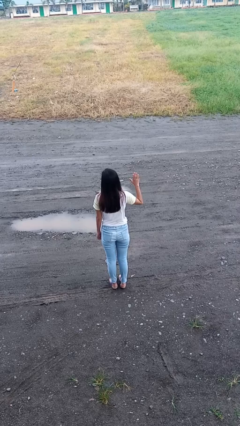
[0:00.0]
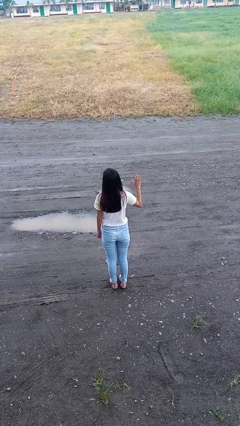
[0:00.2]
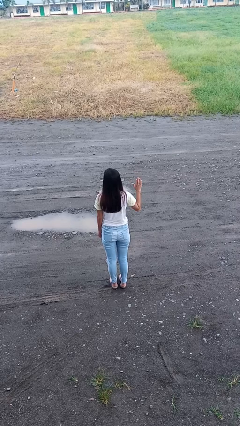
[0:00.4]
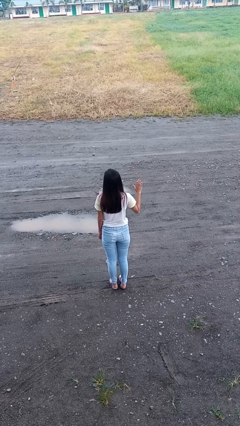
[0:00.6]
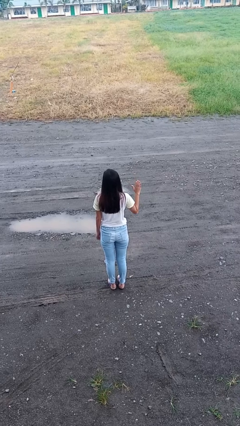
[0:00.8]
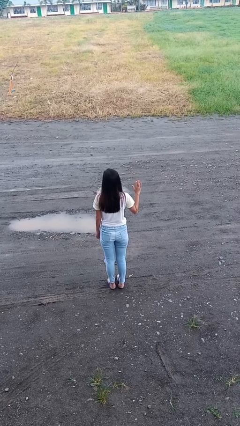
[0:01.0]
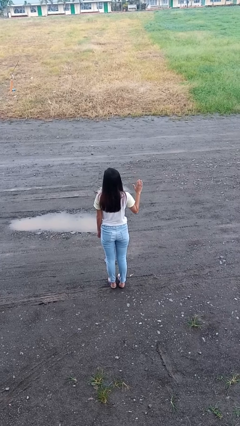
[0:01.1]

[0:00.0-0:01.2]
person gestures lower hand

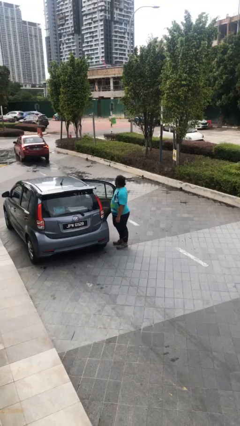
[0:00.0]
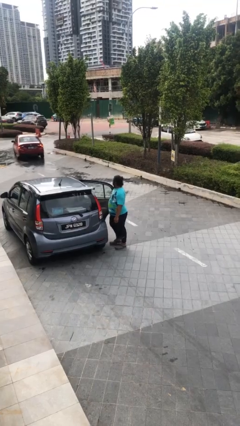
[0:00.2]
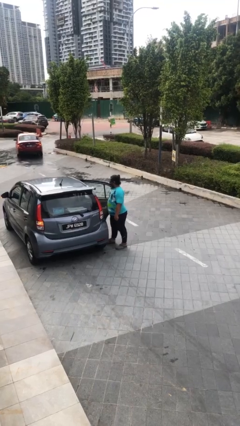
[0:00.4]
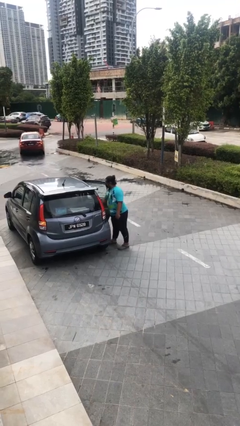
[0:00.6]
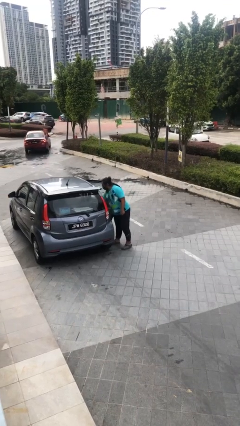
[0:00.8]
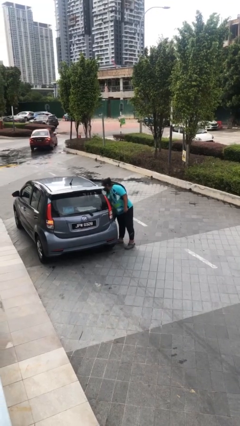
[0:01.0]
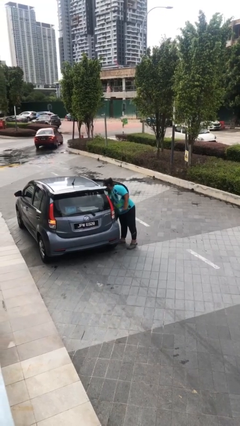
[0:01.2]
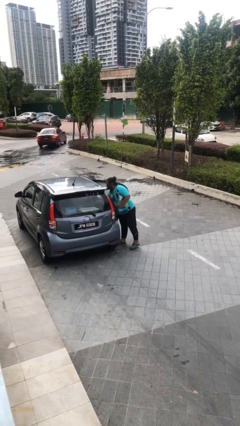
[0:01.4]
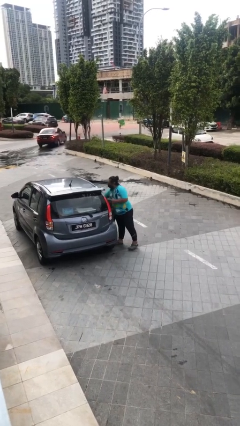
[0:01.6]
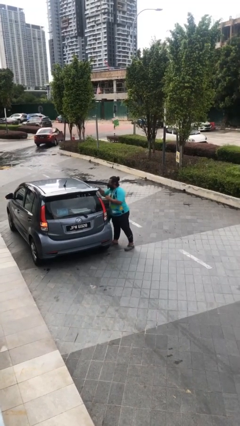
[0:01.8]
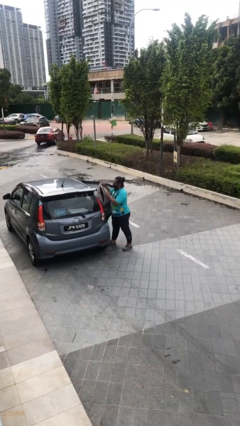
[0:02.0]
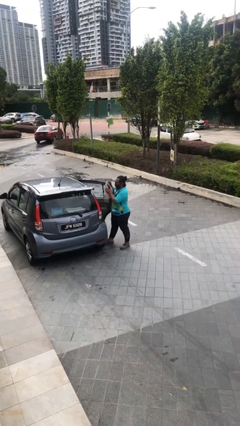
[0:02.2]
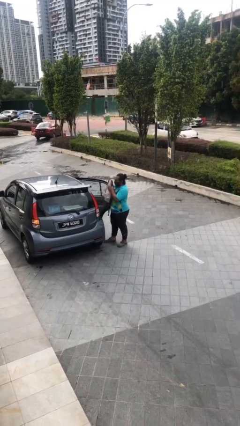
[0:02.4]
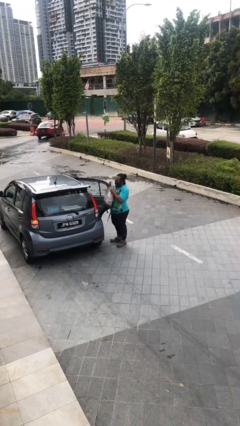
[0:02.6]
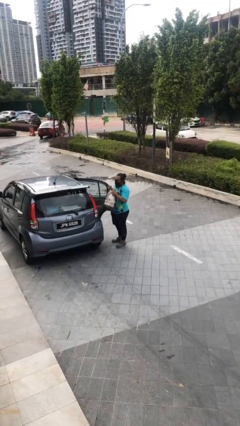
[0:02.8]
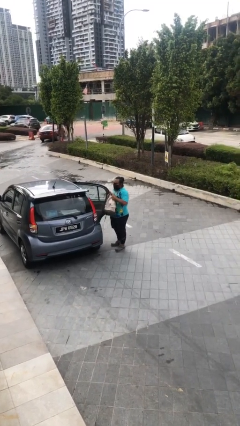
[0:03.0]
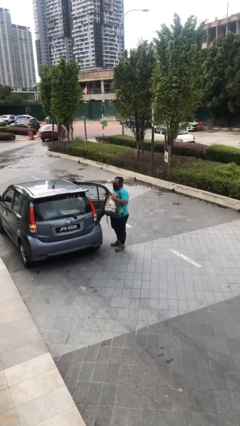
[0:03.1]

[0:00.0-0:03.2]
person unloads car

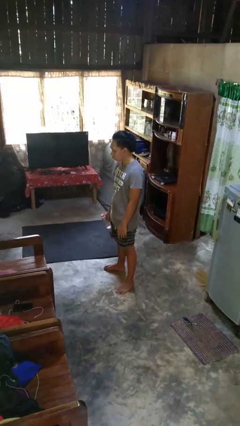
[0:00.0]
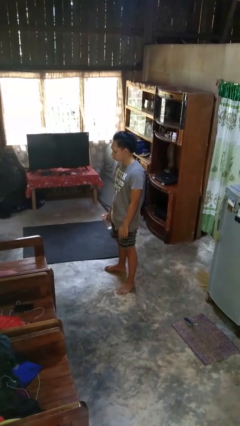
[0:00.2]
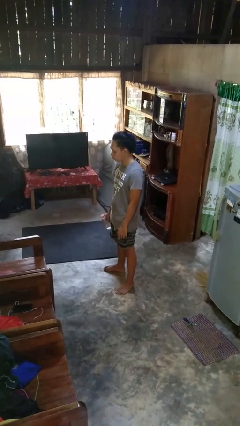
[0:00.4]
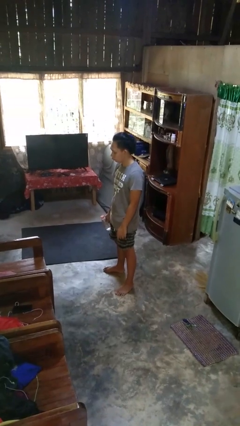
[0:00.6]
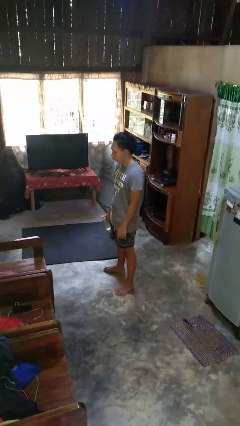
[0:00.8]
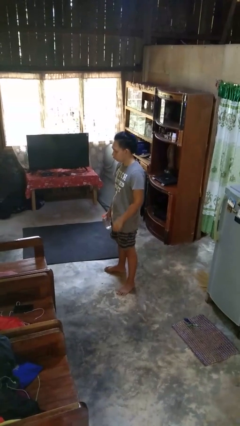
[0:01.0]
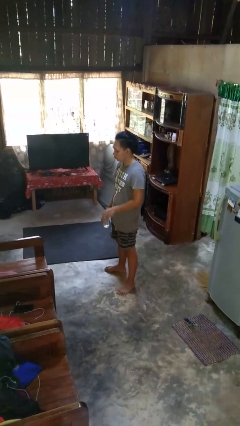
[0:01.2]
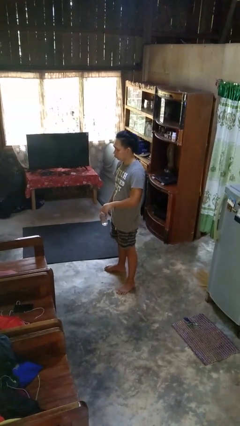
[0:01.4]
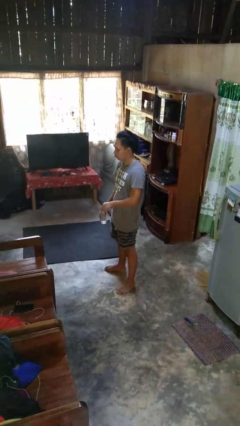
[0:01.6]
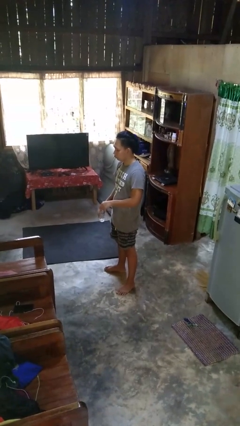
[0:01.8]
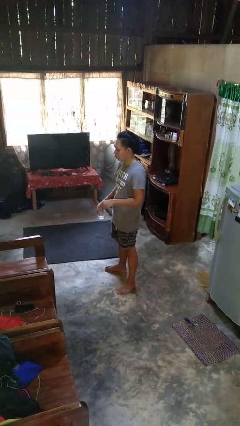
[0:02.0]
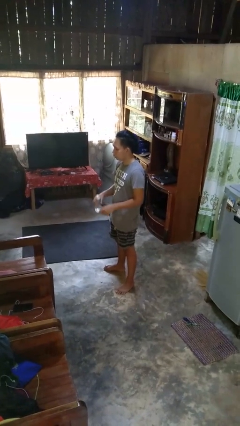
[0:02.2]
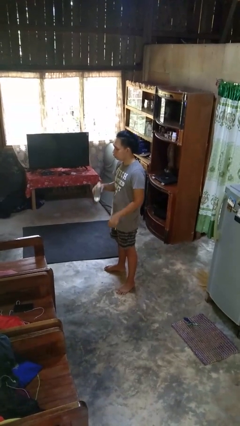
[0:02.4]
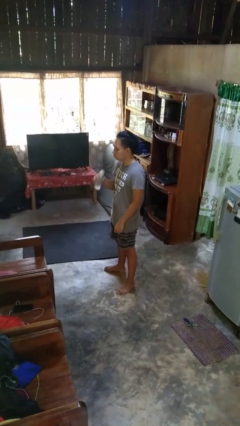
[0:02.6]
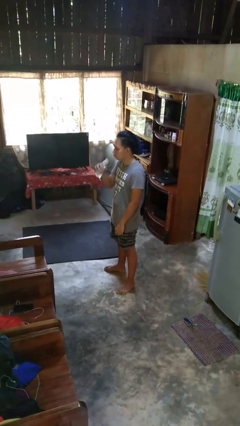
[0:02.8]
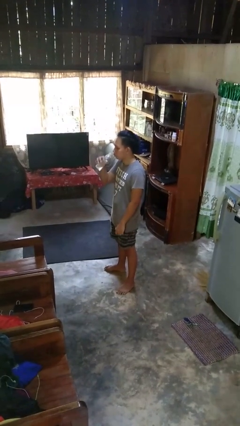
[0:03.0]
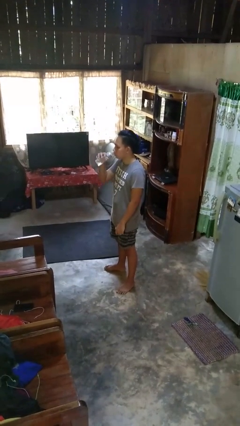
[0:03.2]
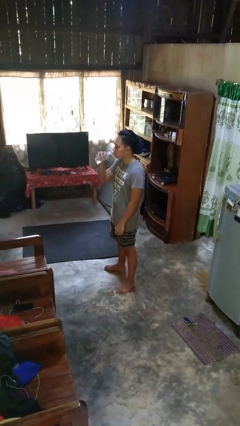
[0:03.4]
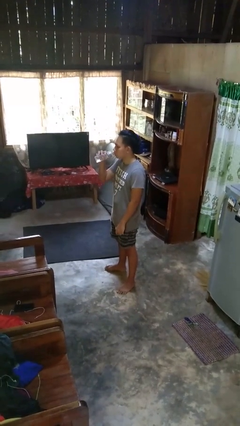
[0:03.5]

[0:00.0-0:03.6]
person drinks from bottle

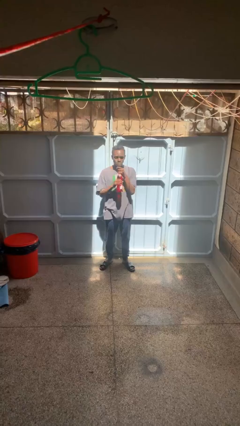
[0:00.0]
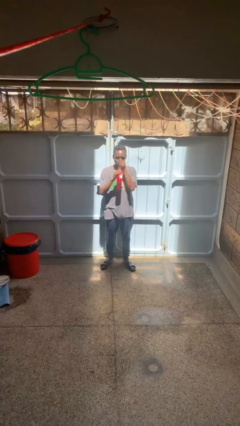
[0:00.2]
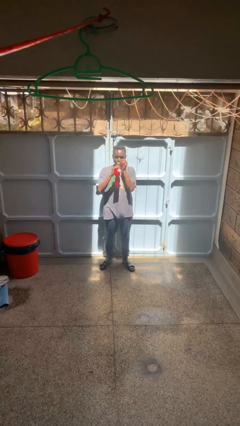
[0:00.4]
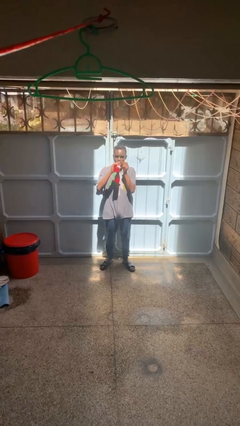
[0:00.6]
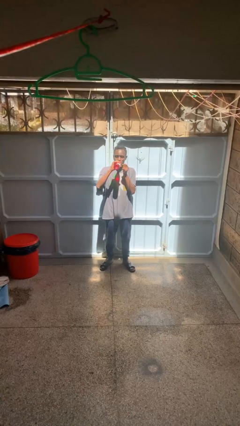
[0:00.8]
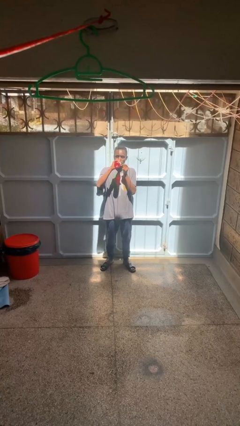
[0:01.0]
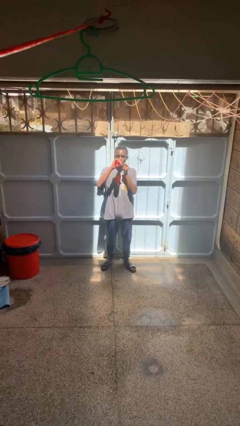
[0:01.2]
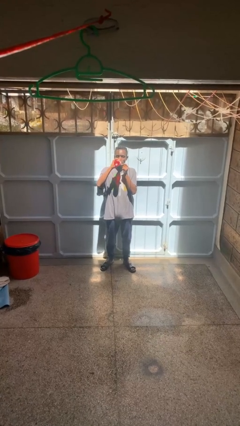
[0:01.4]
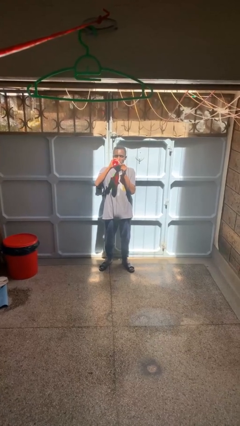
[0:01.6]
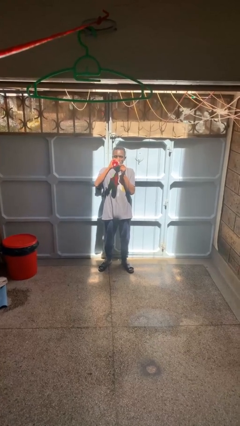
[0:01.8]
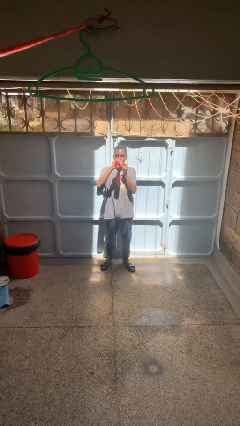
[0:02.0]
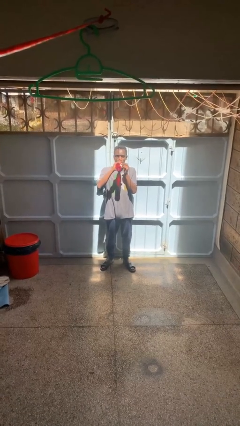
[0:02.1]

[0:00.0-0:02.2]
person drinks from beverage can

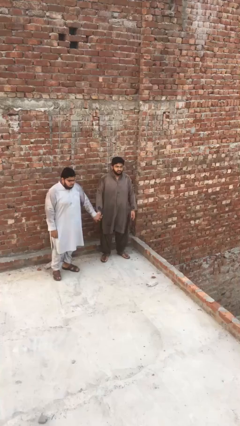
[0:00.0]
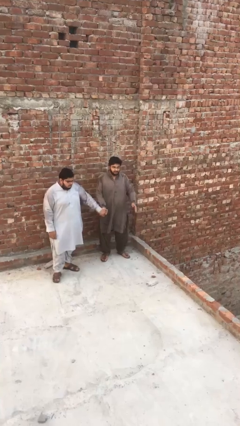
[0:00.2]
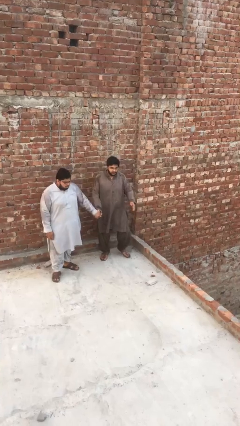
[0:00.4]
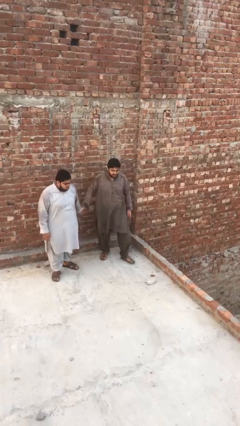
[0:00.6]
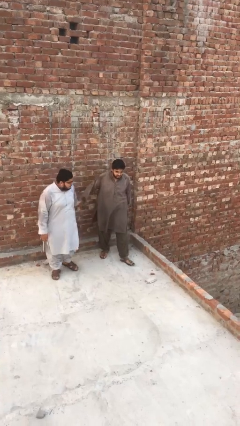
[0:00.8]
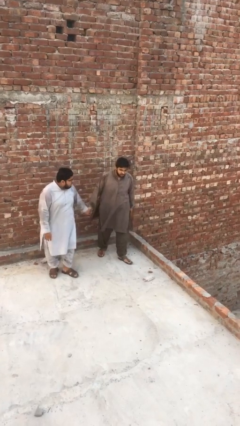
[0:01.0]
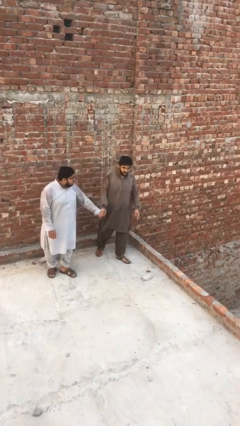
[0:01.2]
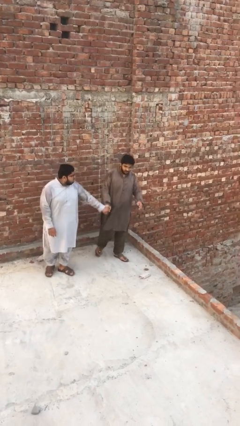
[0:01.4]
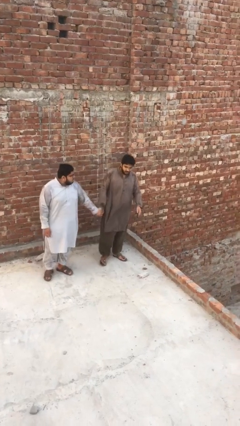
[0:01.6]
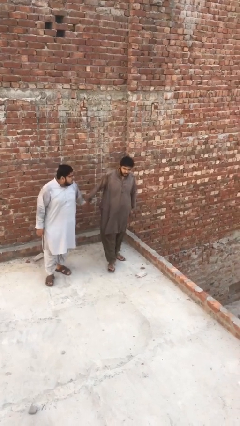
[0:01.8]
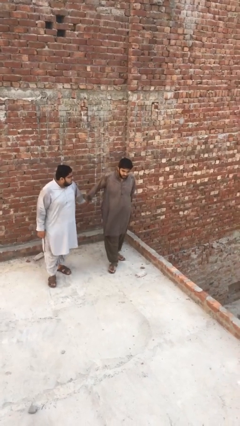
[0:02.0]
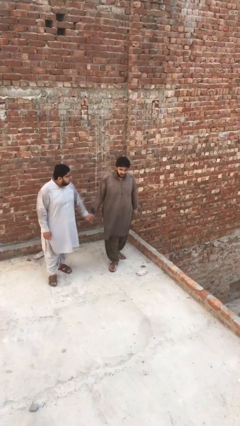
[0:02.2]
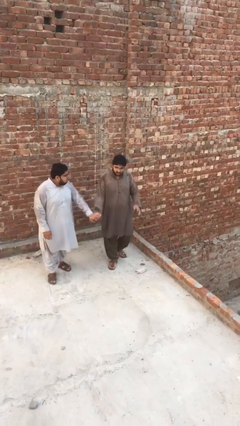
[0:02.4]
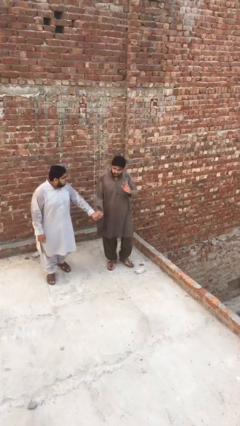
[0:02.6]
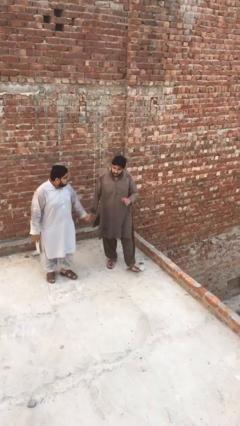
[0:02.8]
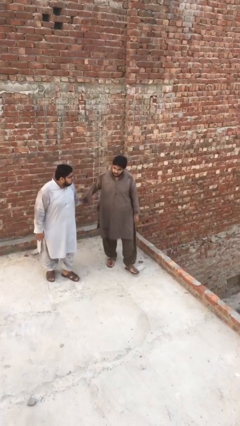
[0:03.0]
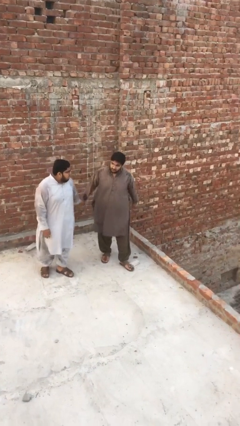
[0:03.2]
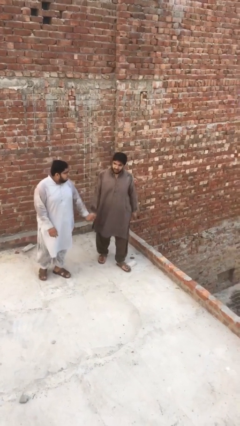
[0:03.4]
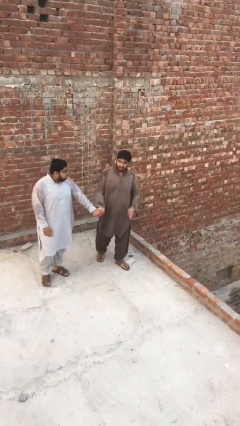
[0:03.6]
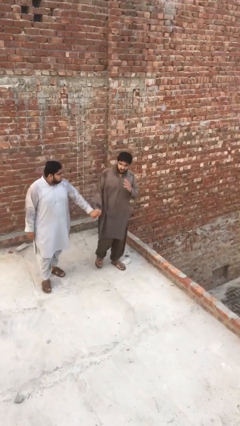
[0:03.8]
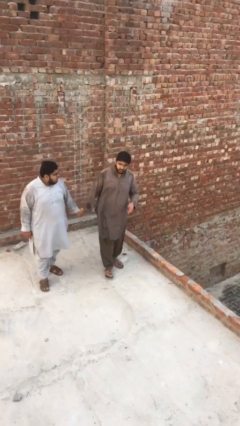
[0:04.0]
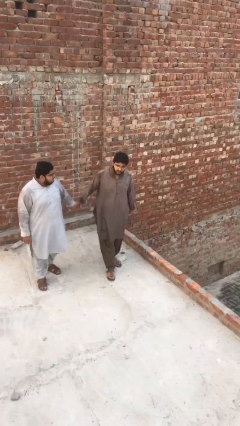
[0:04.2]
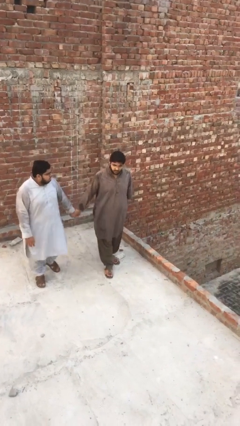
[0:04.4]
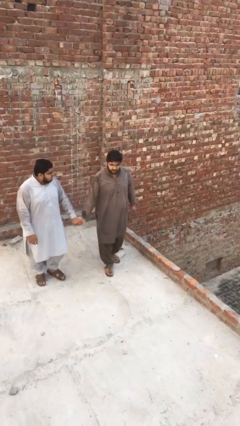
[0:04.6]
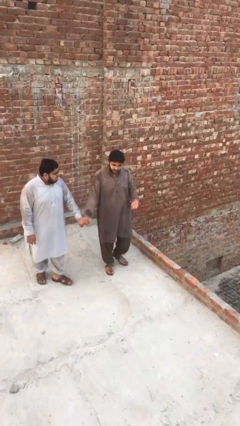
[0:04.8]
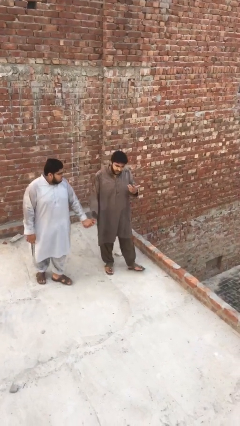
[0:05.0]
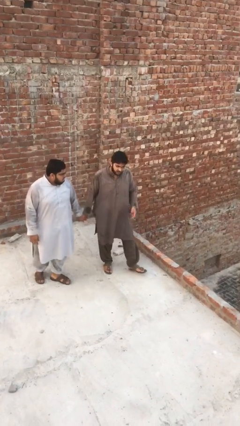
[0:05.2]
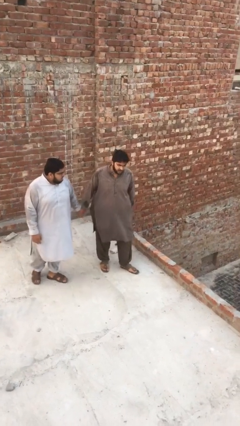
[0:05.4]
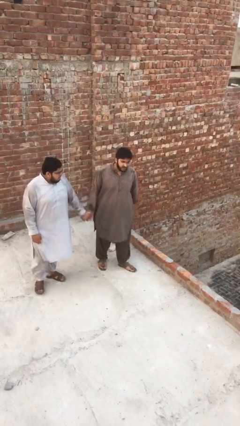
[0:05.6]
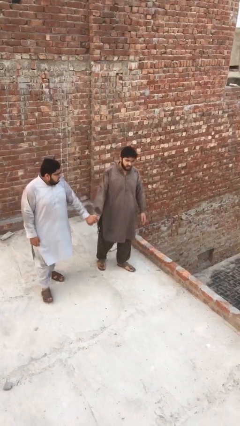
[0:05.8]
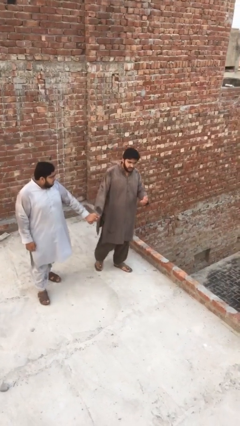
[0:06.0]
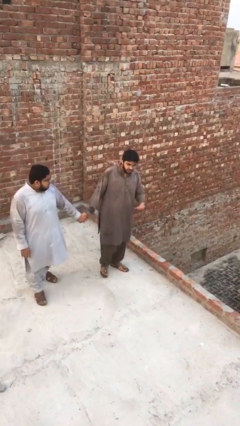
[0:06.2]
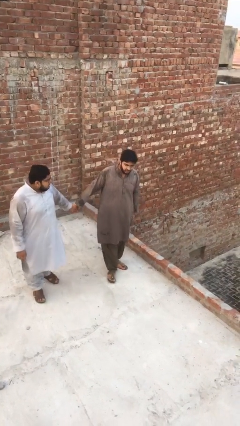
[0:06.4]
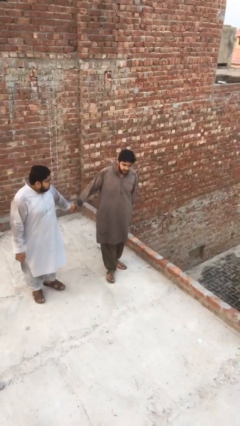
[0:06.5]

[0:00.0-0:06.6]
person holds hand

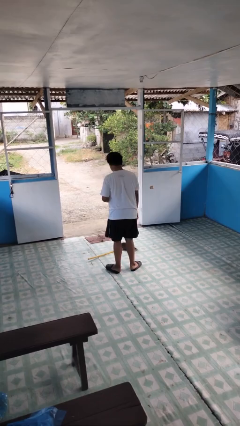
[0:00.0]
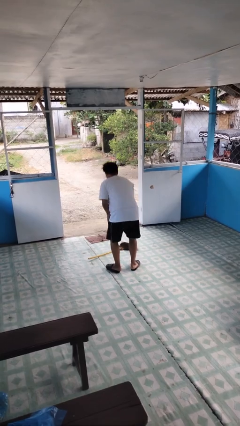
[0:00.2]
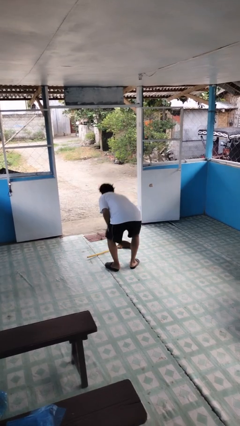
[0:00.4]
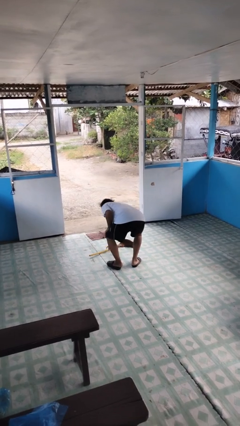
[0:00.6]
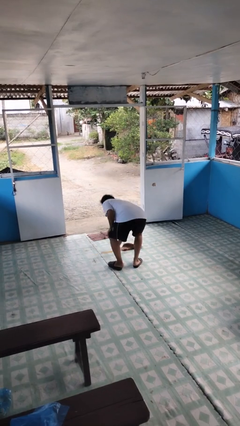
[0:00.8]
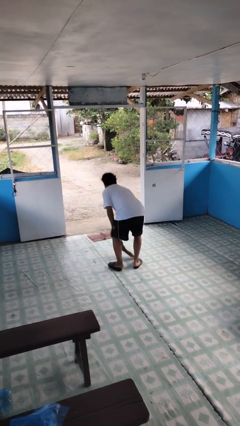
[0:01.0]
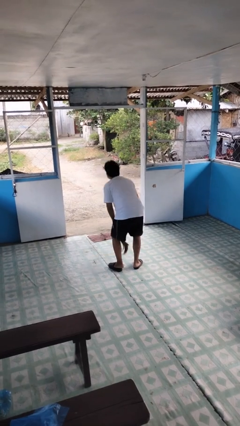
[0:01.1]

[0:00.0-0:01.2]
person picks up object from floor
